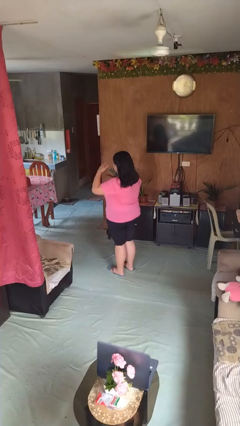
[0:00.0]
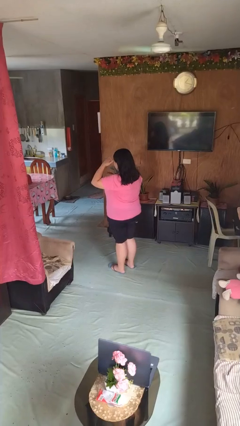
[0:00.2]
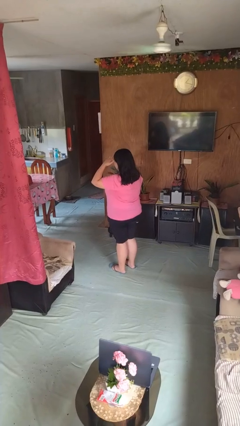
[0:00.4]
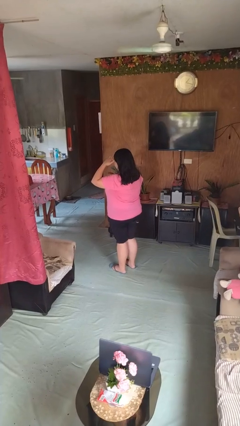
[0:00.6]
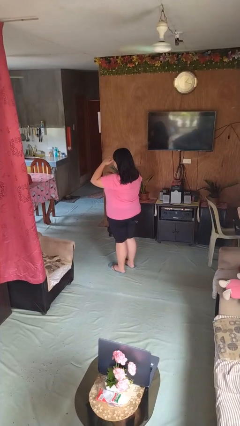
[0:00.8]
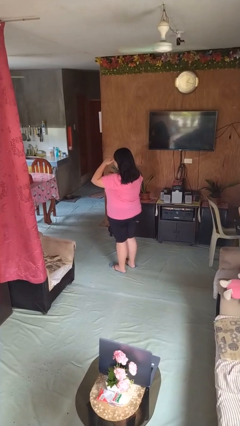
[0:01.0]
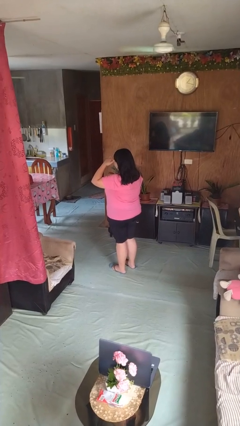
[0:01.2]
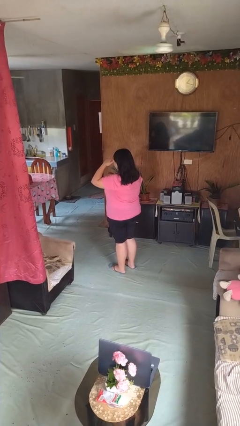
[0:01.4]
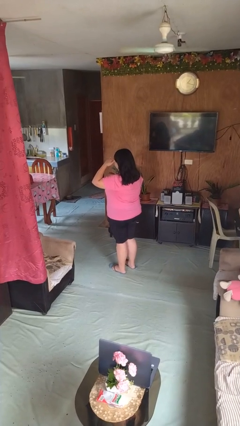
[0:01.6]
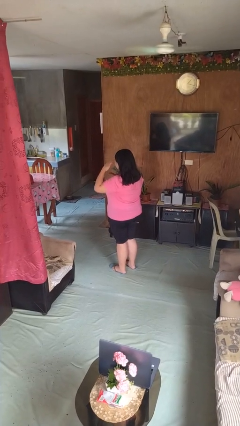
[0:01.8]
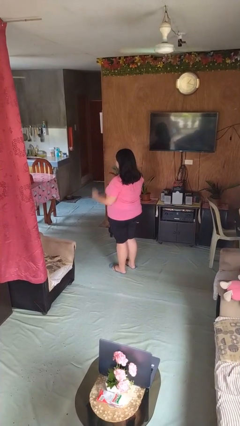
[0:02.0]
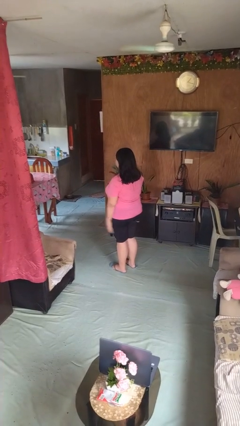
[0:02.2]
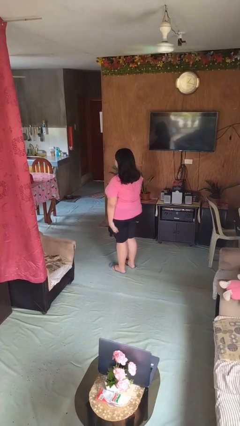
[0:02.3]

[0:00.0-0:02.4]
person salutes

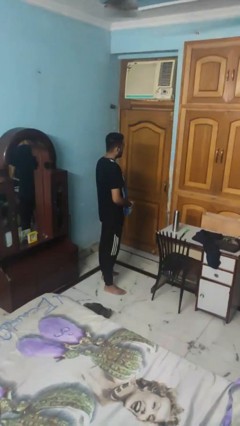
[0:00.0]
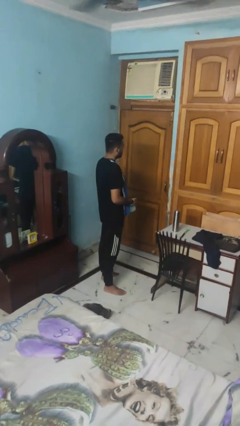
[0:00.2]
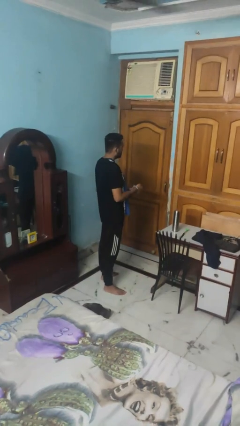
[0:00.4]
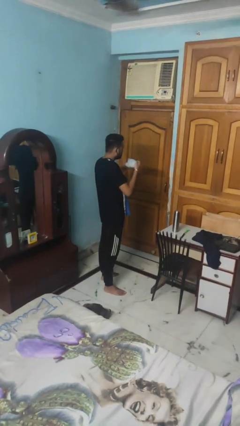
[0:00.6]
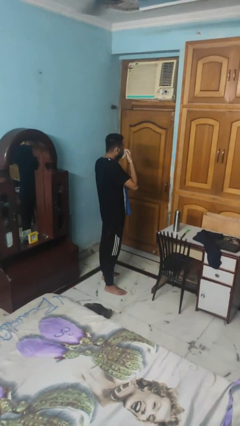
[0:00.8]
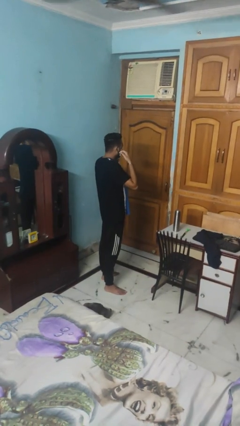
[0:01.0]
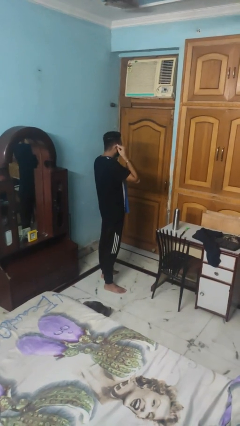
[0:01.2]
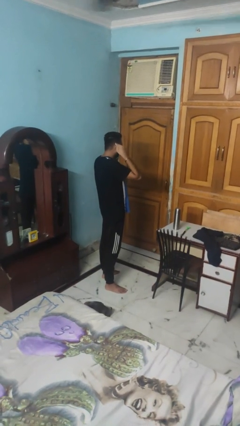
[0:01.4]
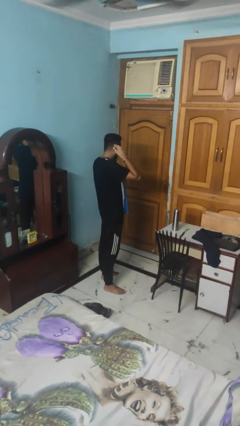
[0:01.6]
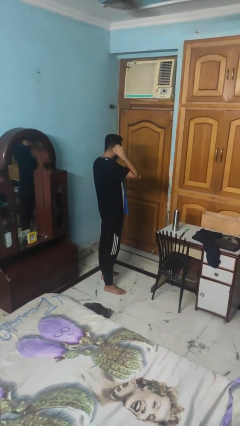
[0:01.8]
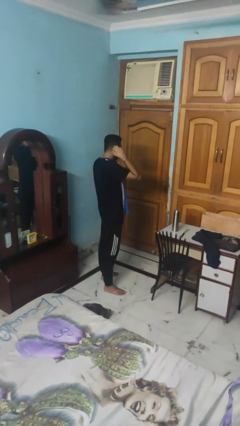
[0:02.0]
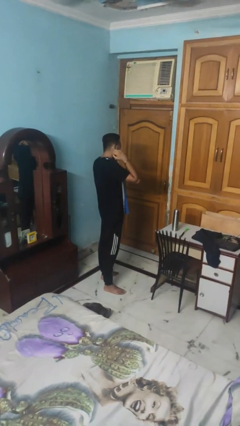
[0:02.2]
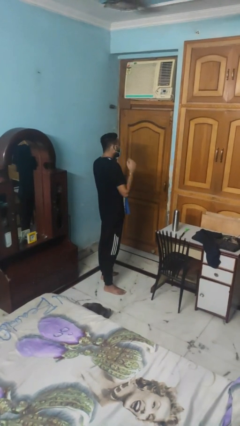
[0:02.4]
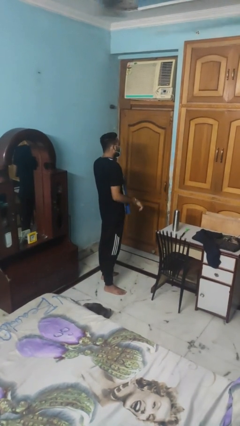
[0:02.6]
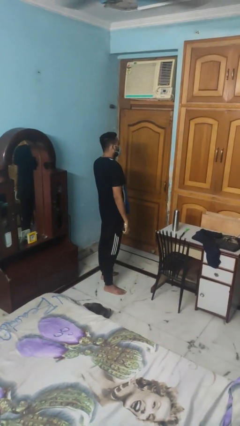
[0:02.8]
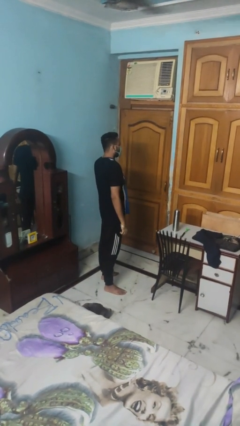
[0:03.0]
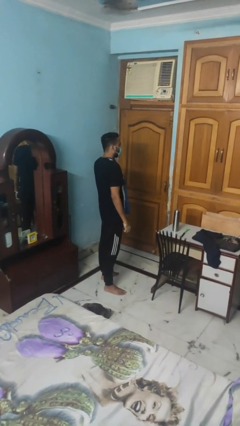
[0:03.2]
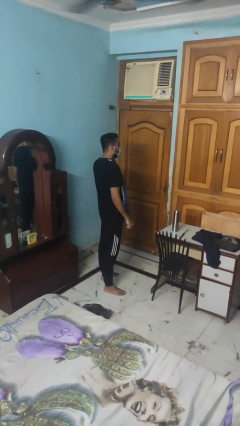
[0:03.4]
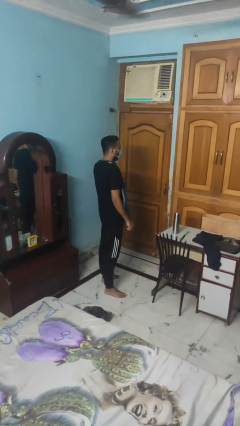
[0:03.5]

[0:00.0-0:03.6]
person puts on facemask

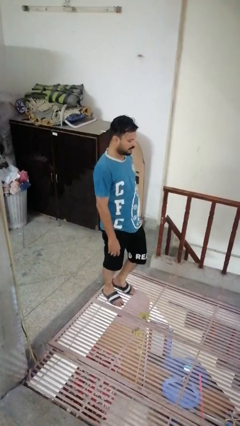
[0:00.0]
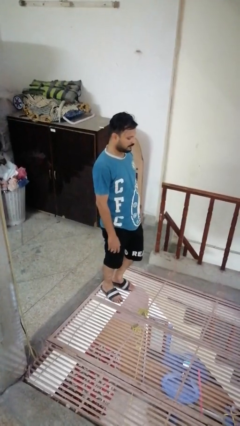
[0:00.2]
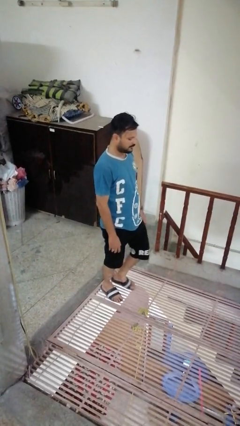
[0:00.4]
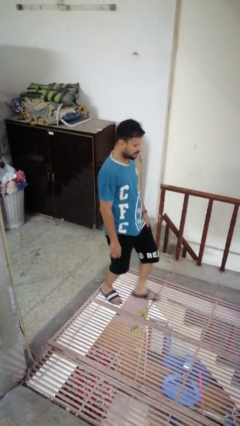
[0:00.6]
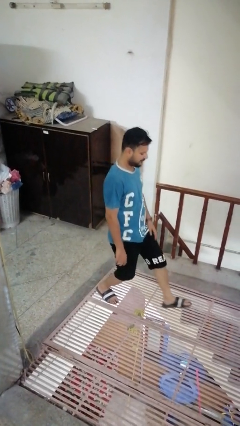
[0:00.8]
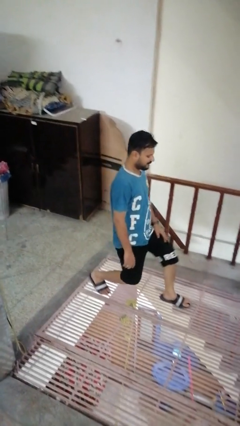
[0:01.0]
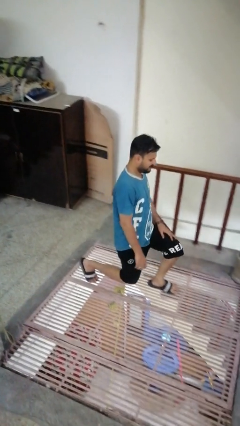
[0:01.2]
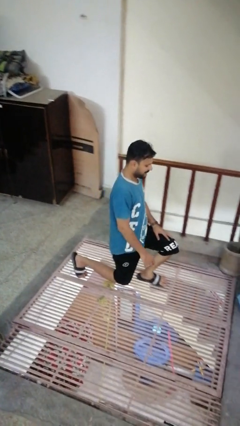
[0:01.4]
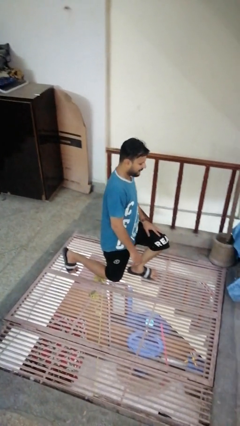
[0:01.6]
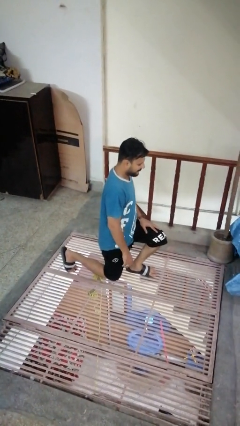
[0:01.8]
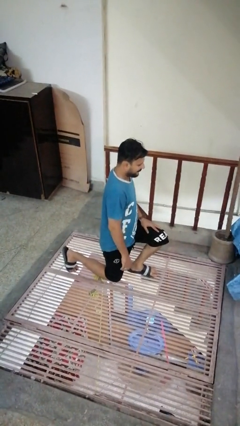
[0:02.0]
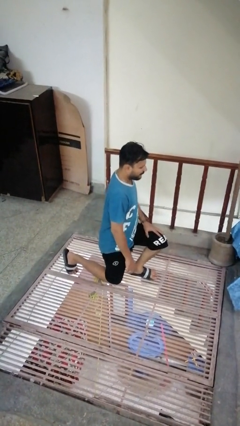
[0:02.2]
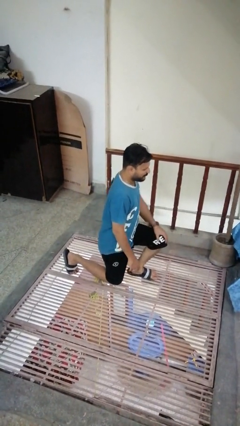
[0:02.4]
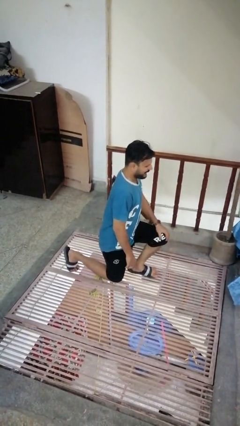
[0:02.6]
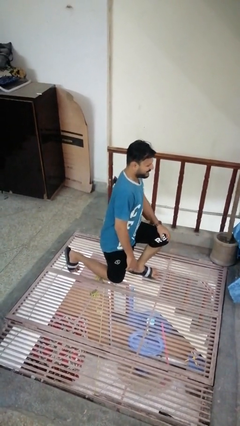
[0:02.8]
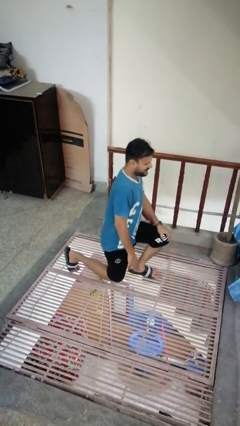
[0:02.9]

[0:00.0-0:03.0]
person exercises with lunges

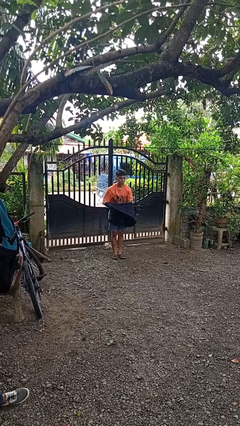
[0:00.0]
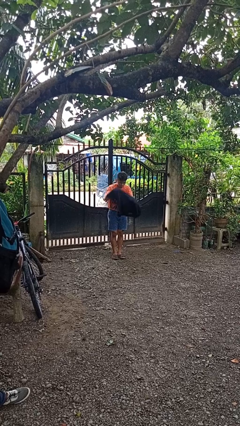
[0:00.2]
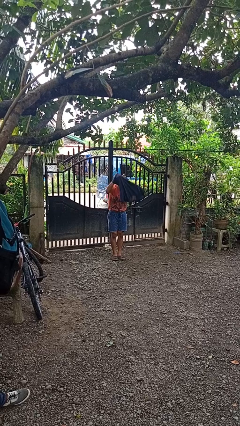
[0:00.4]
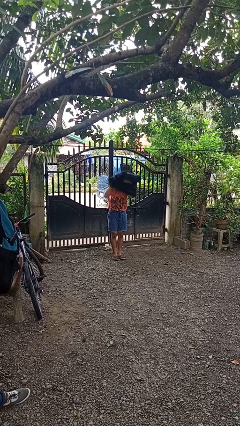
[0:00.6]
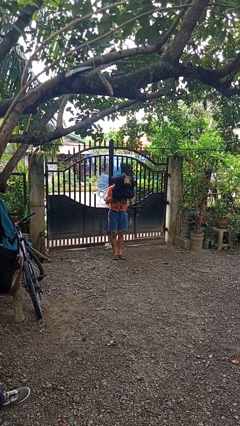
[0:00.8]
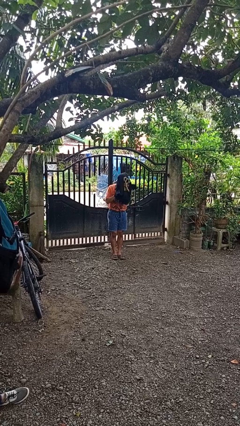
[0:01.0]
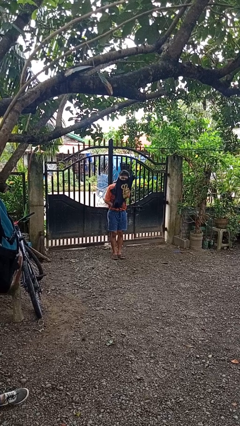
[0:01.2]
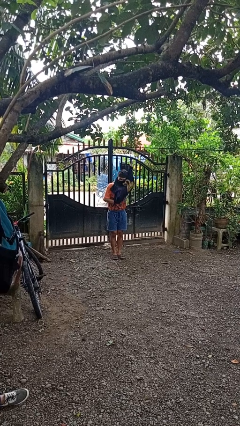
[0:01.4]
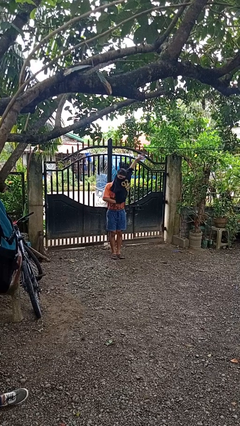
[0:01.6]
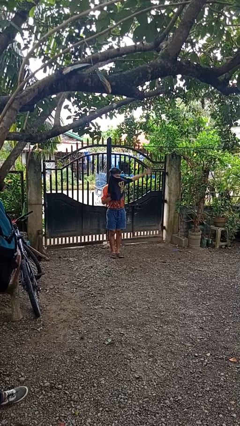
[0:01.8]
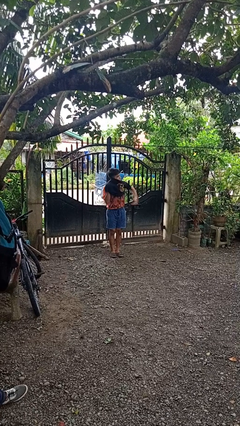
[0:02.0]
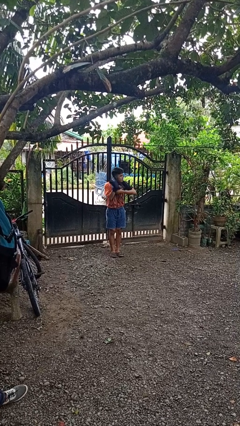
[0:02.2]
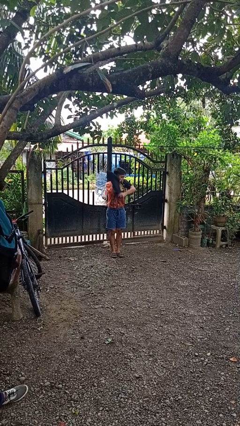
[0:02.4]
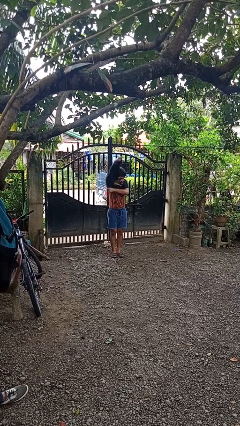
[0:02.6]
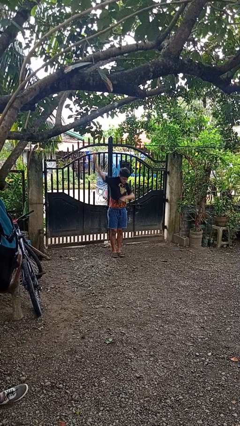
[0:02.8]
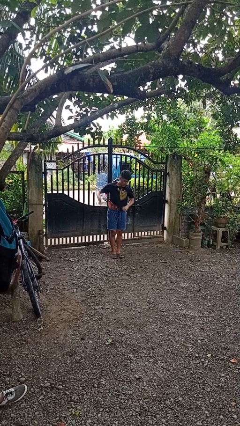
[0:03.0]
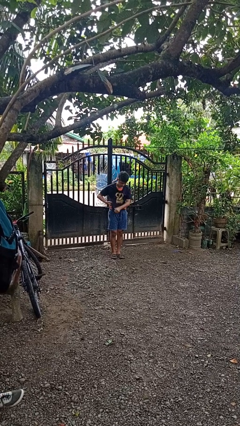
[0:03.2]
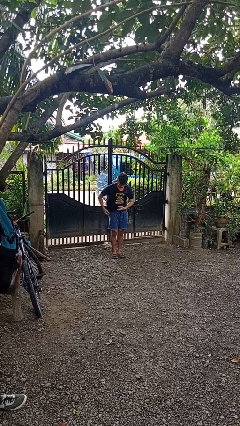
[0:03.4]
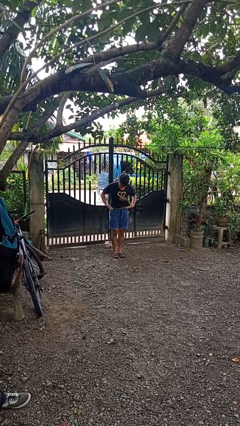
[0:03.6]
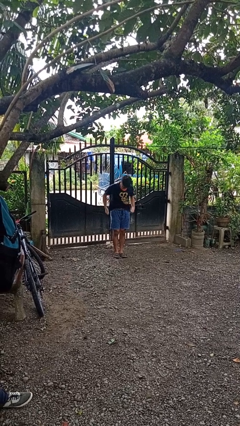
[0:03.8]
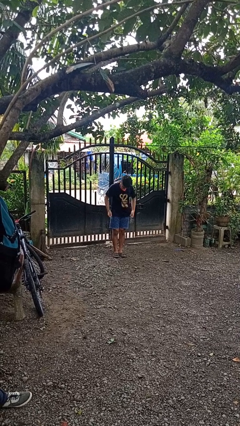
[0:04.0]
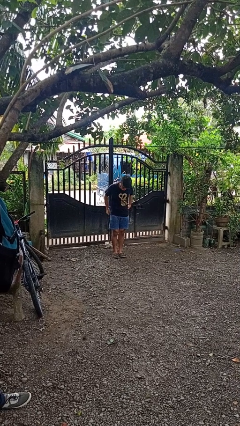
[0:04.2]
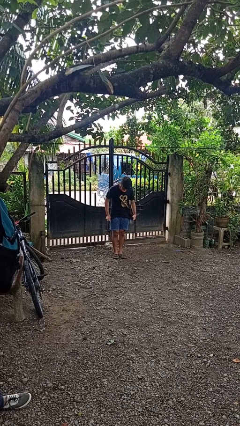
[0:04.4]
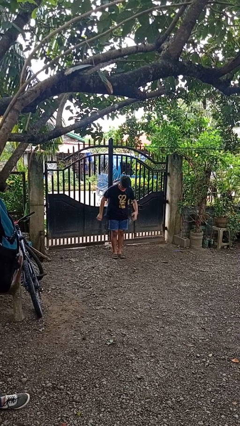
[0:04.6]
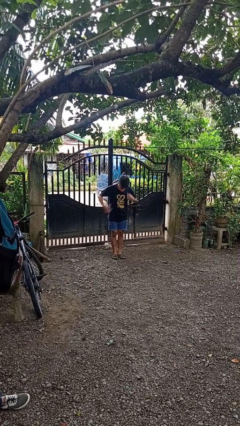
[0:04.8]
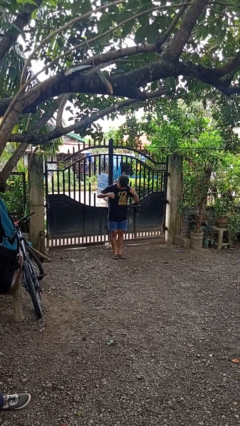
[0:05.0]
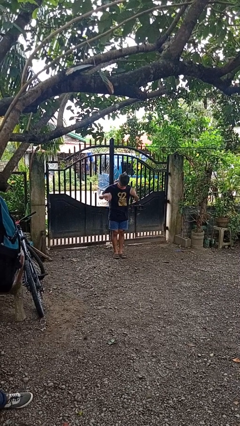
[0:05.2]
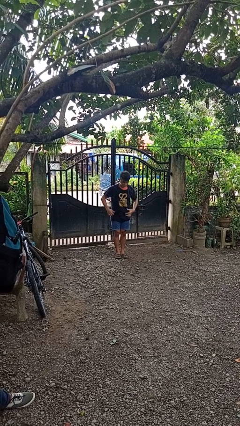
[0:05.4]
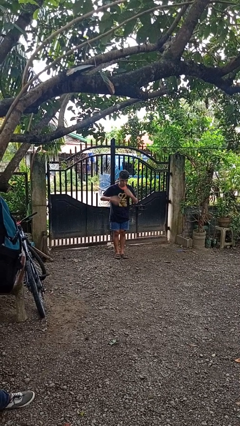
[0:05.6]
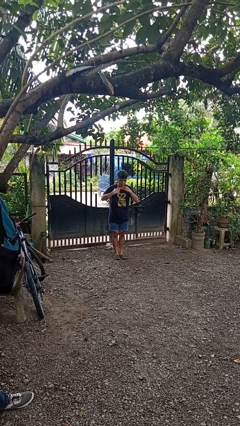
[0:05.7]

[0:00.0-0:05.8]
person puts on shirt

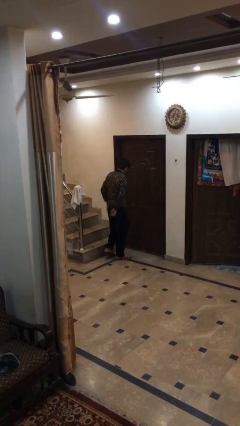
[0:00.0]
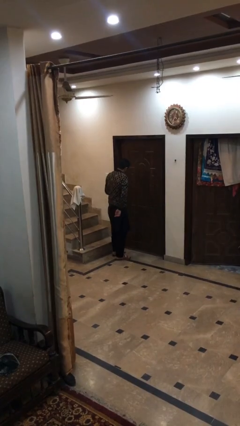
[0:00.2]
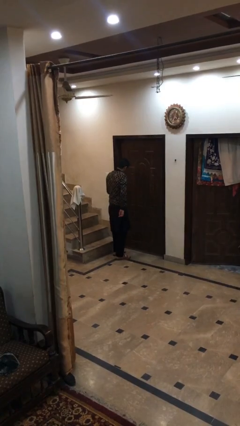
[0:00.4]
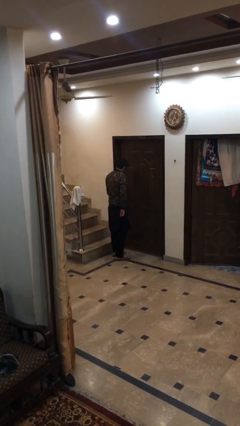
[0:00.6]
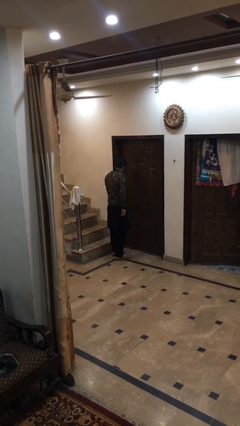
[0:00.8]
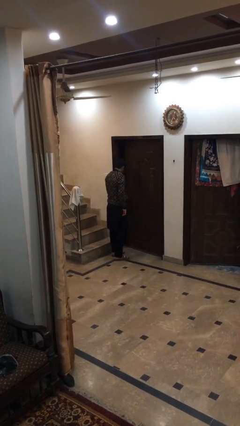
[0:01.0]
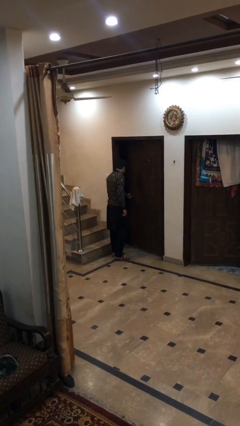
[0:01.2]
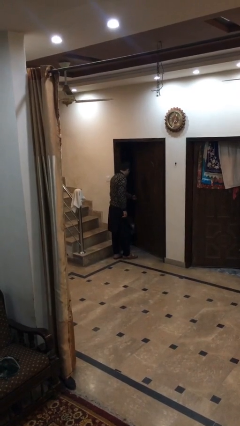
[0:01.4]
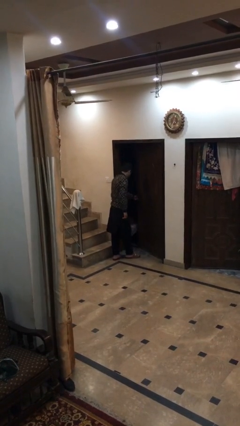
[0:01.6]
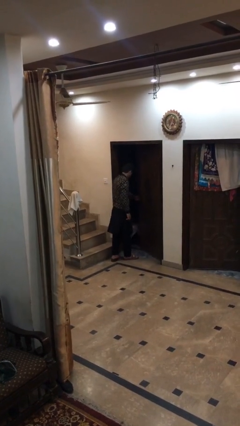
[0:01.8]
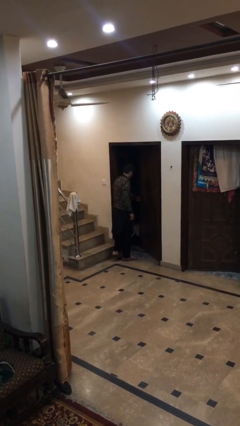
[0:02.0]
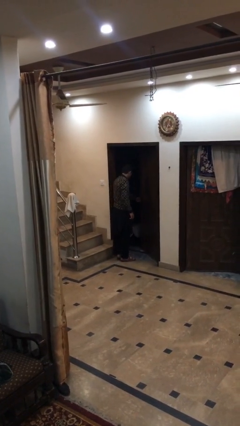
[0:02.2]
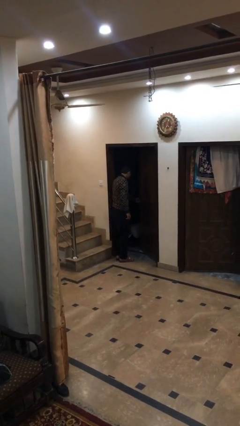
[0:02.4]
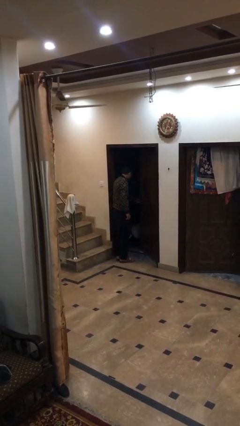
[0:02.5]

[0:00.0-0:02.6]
person opens facility door
